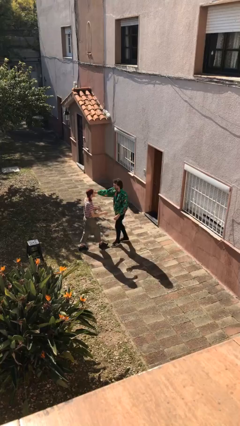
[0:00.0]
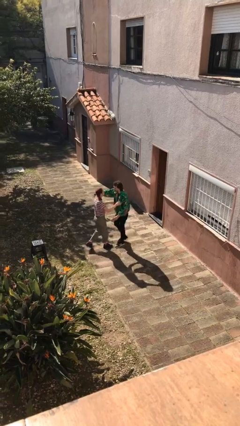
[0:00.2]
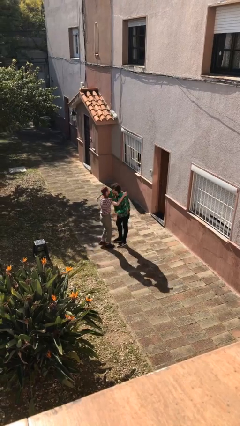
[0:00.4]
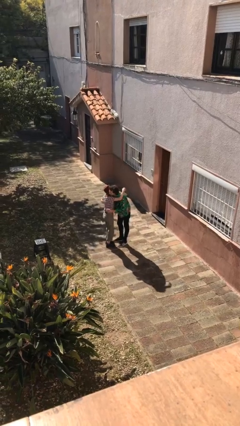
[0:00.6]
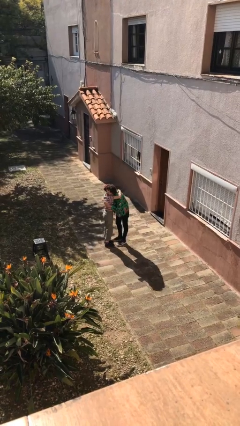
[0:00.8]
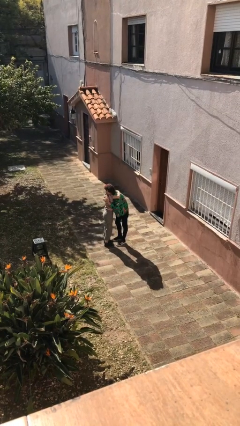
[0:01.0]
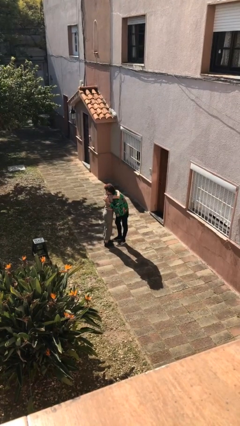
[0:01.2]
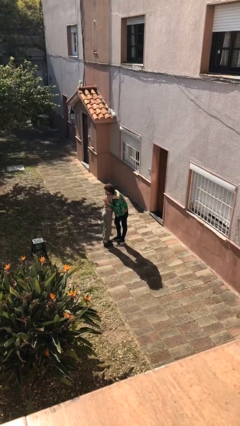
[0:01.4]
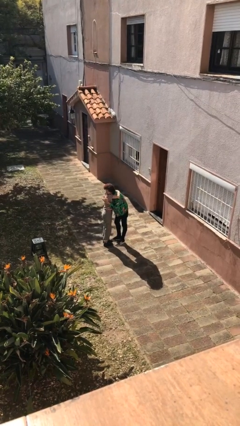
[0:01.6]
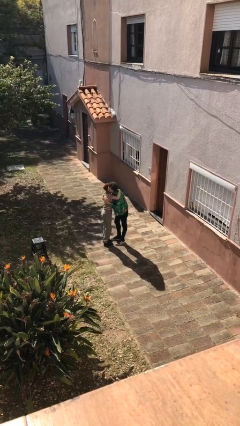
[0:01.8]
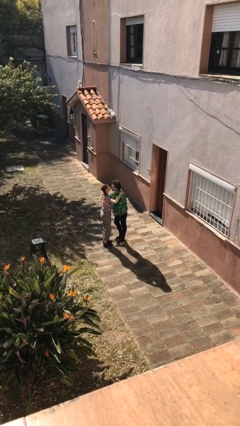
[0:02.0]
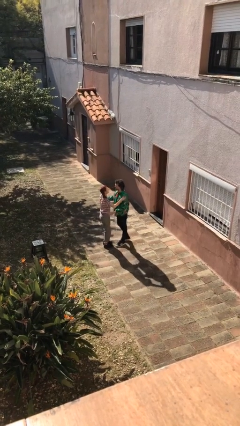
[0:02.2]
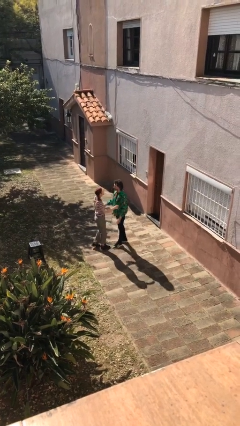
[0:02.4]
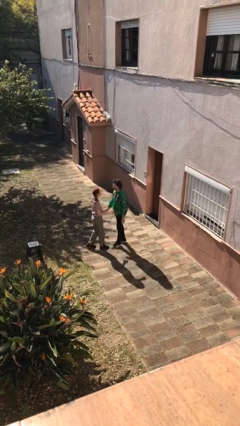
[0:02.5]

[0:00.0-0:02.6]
person embraces person

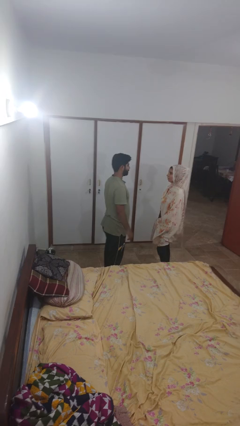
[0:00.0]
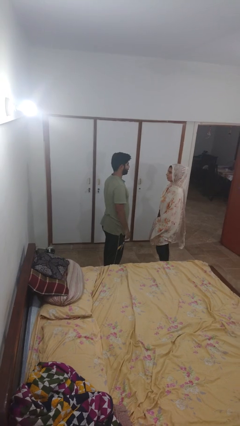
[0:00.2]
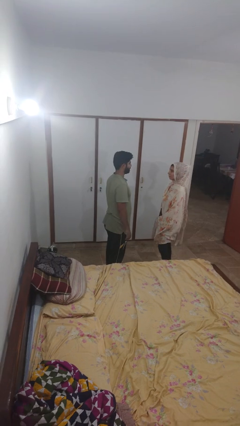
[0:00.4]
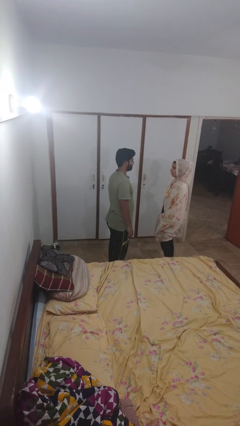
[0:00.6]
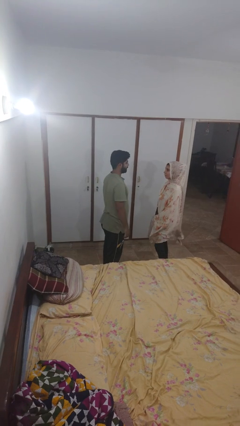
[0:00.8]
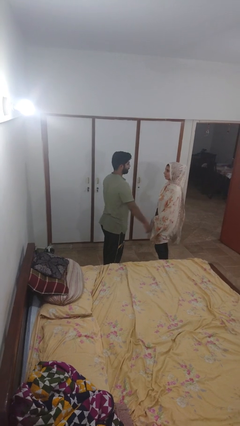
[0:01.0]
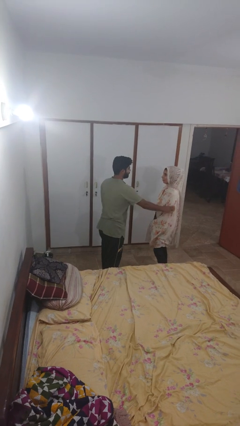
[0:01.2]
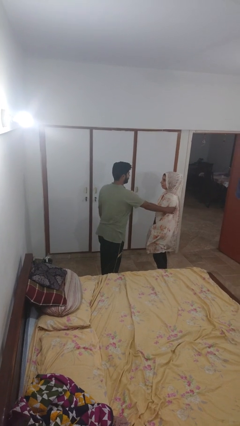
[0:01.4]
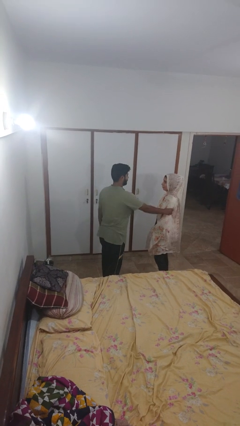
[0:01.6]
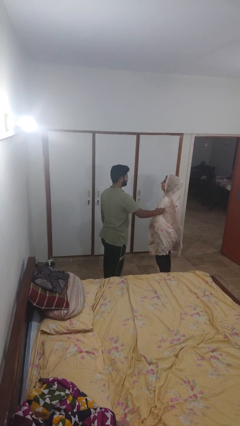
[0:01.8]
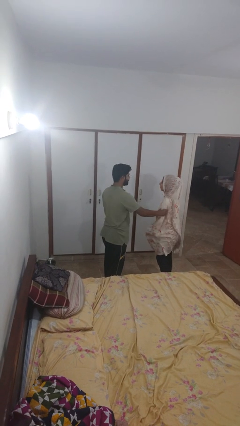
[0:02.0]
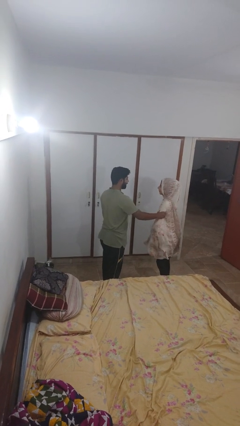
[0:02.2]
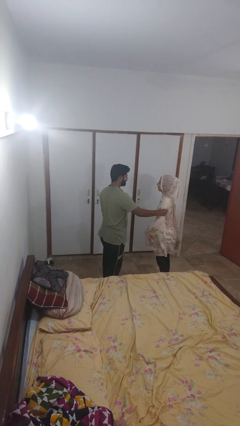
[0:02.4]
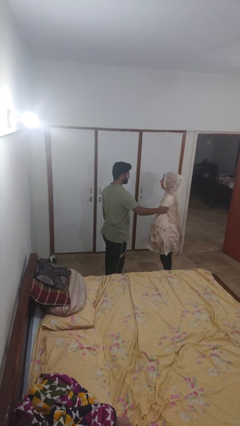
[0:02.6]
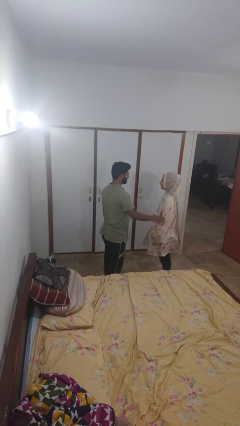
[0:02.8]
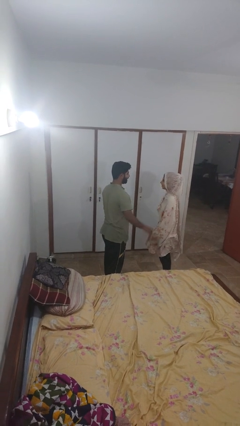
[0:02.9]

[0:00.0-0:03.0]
person grabs person by bicep

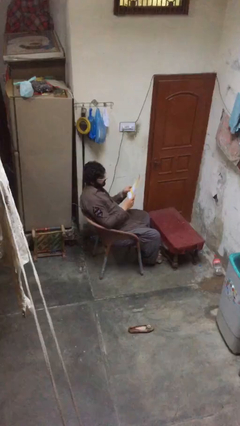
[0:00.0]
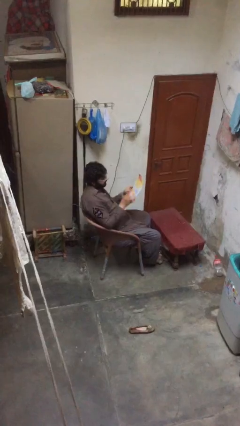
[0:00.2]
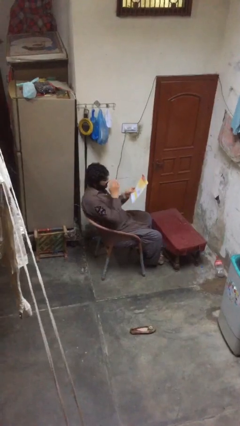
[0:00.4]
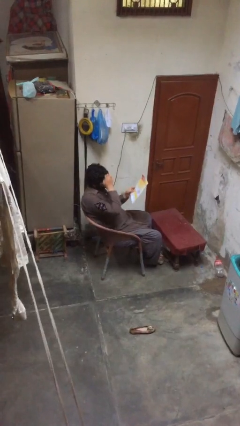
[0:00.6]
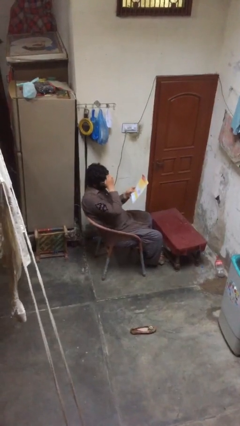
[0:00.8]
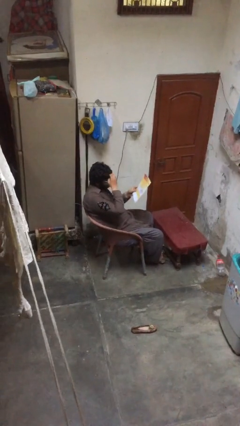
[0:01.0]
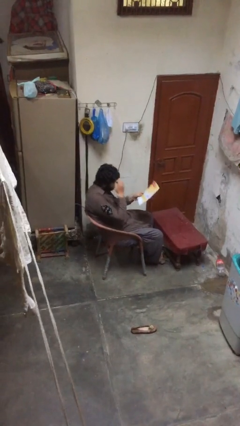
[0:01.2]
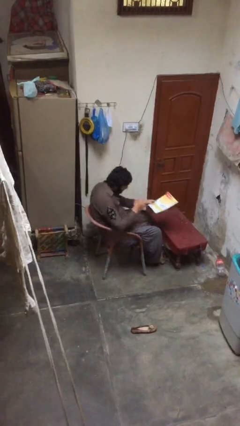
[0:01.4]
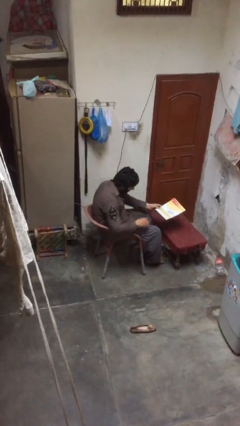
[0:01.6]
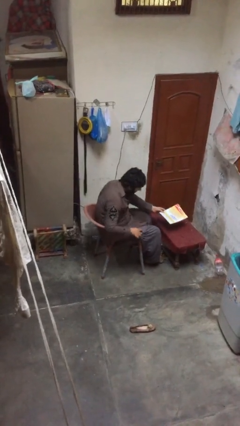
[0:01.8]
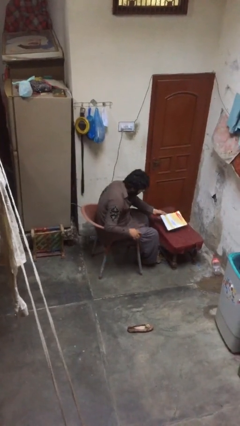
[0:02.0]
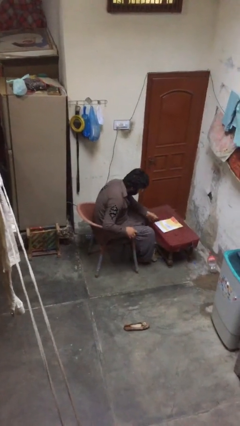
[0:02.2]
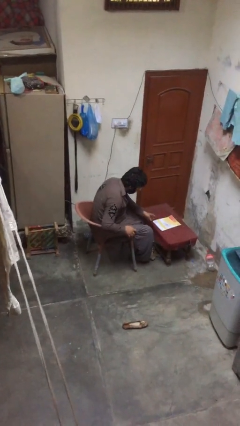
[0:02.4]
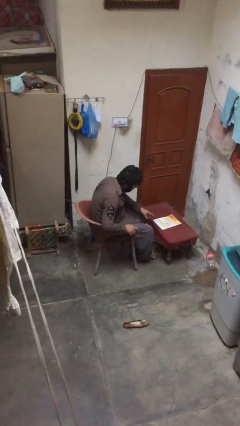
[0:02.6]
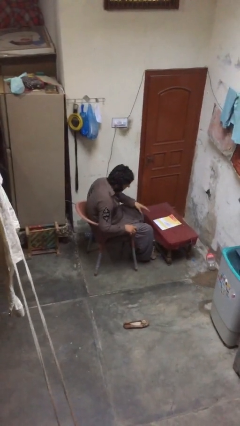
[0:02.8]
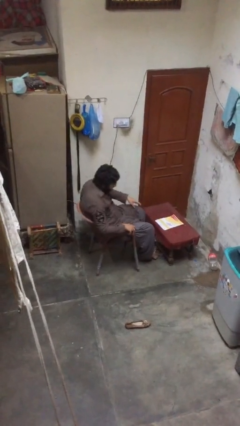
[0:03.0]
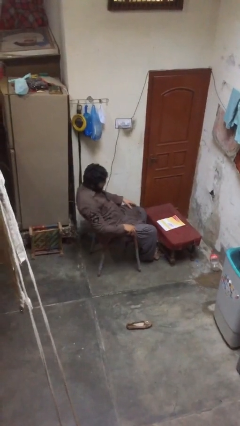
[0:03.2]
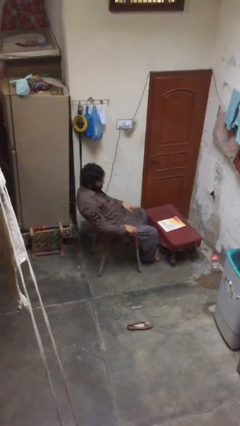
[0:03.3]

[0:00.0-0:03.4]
person puts down object on table

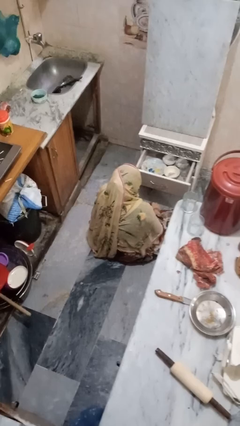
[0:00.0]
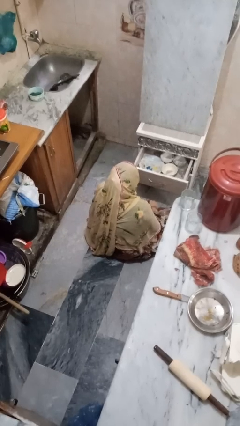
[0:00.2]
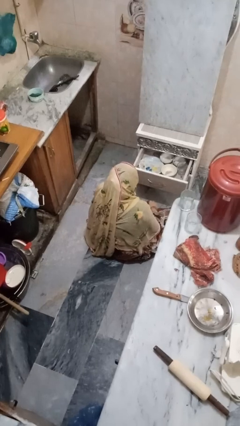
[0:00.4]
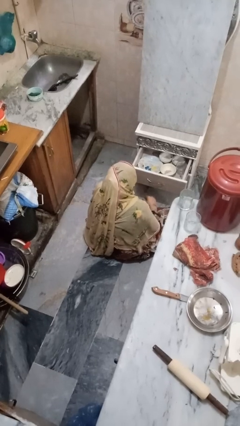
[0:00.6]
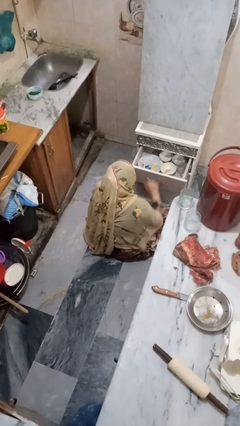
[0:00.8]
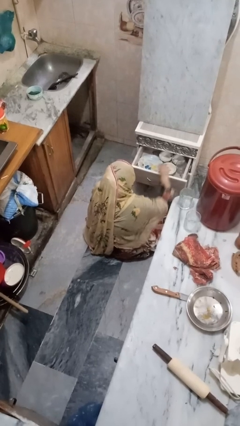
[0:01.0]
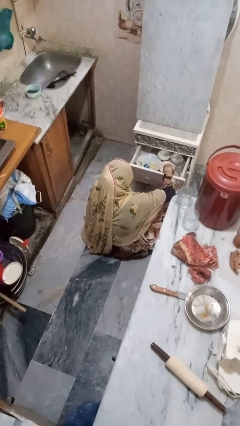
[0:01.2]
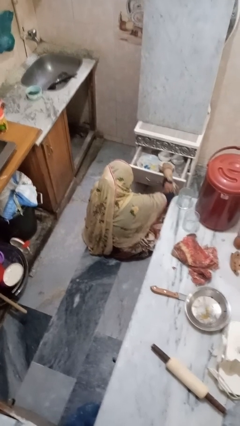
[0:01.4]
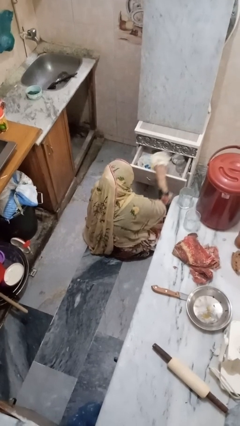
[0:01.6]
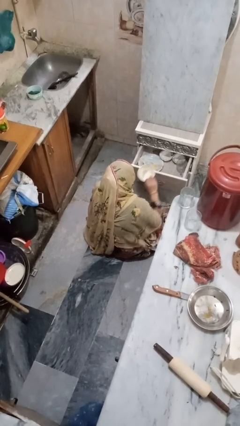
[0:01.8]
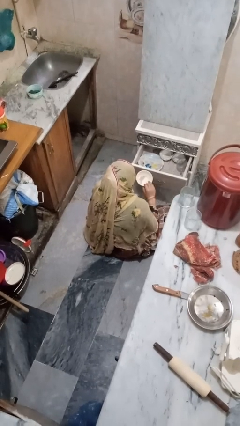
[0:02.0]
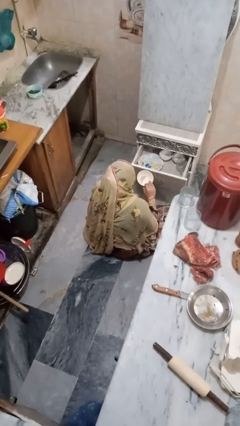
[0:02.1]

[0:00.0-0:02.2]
person takes object from kitchen drawer

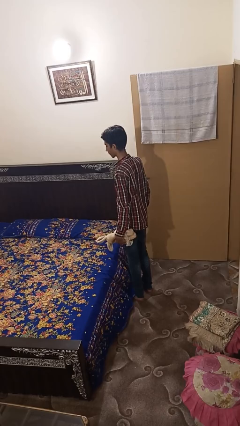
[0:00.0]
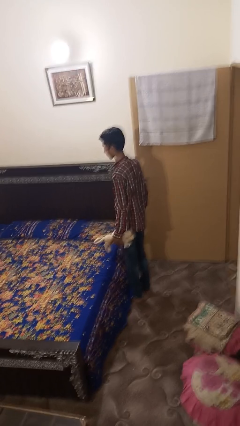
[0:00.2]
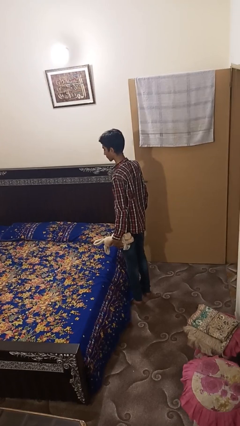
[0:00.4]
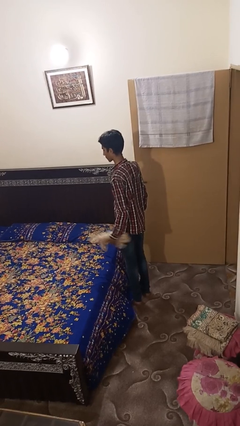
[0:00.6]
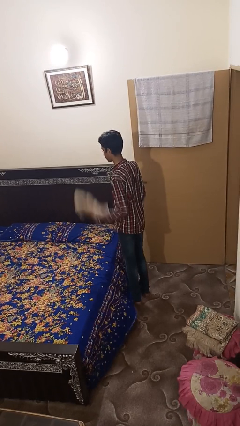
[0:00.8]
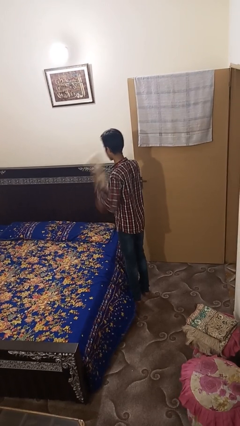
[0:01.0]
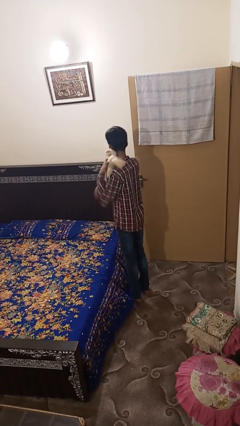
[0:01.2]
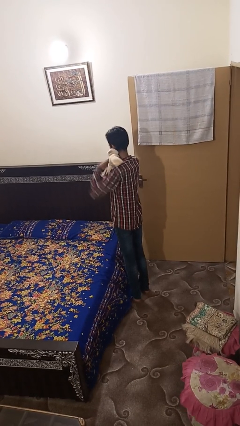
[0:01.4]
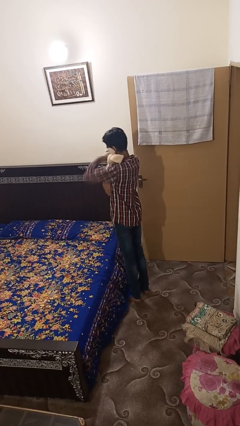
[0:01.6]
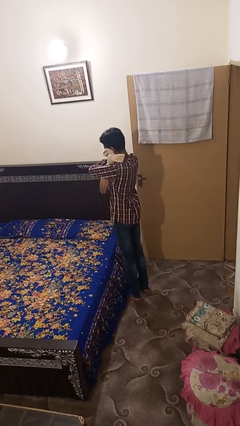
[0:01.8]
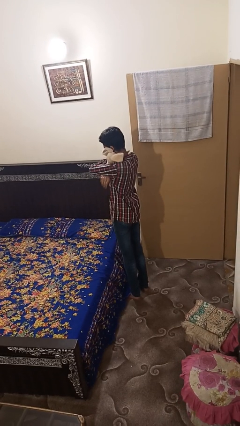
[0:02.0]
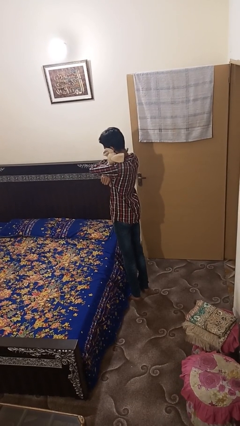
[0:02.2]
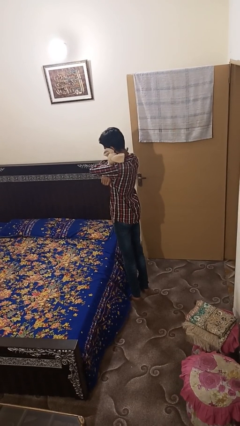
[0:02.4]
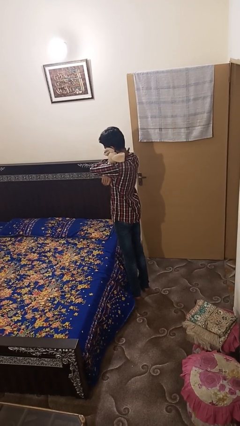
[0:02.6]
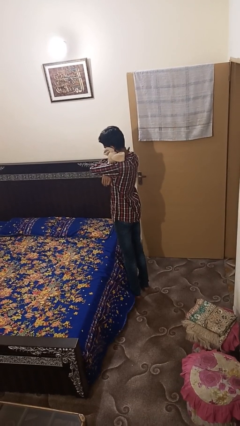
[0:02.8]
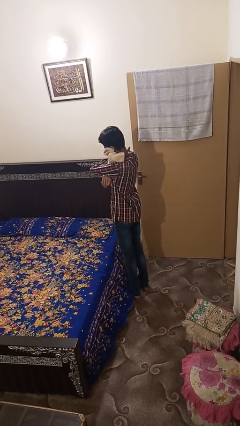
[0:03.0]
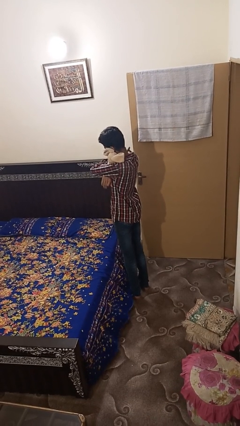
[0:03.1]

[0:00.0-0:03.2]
person hugs stuffed animal

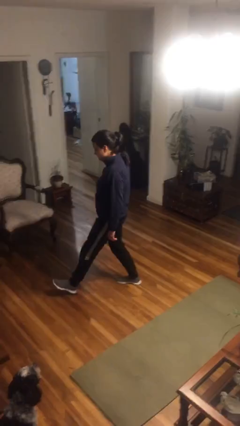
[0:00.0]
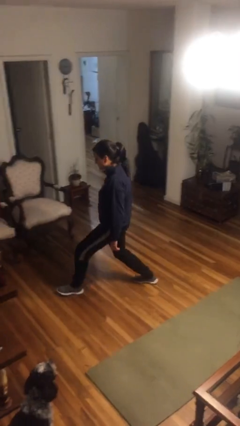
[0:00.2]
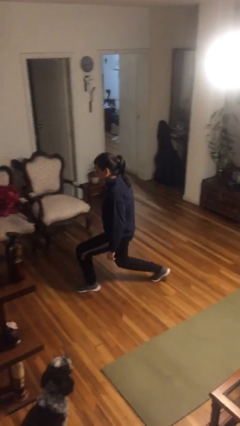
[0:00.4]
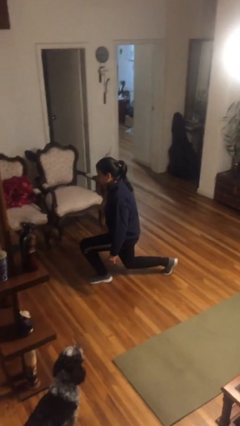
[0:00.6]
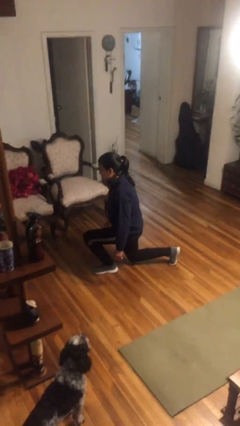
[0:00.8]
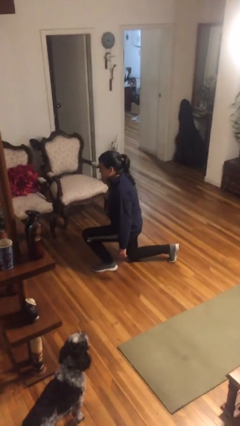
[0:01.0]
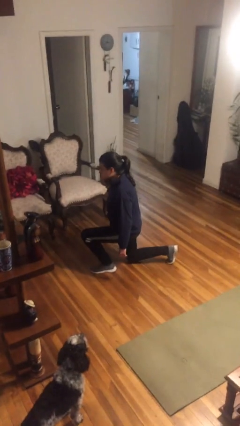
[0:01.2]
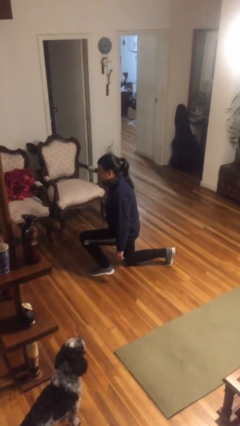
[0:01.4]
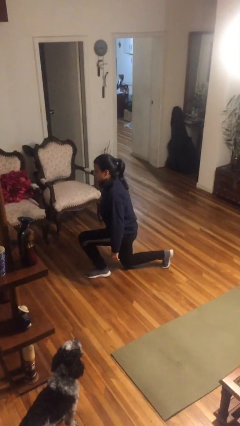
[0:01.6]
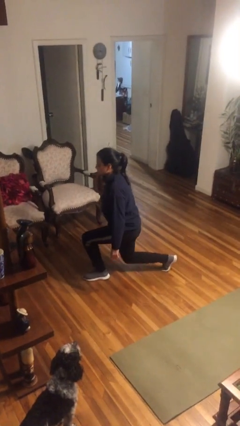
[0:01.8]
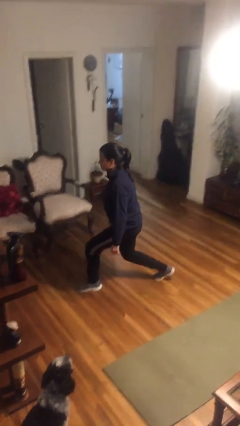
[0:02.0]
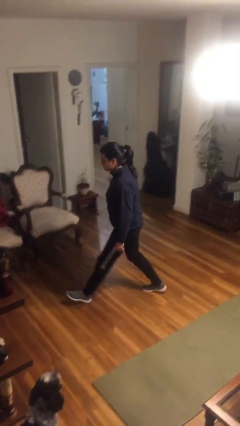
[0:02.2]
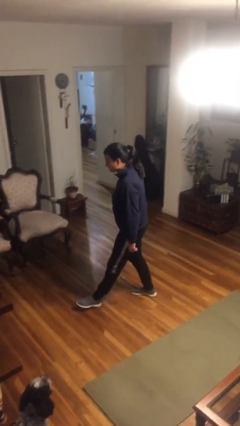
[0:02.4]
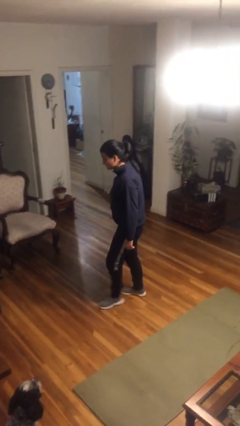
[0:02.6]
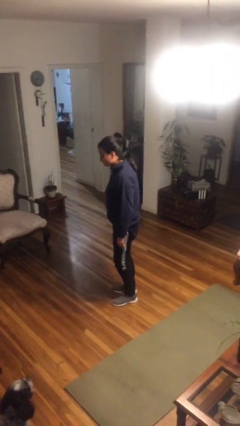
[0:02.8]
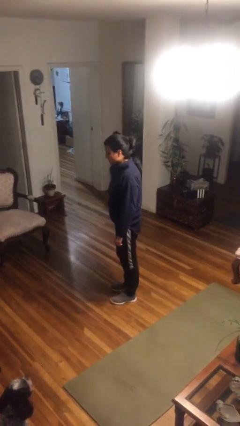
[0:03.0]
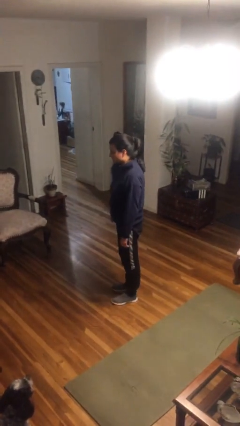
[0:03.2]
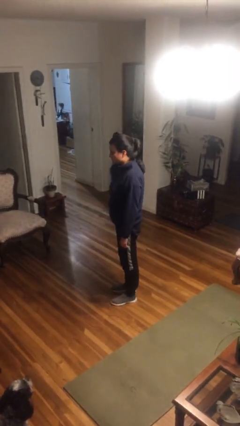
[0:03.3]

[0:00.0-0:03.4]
person exercises with lunges
